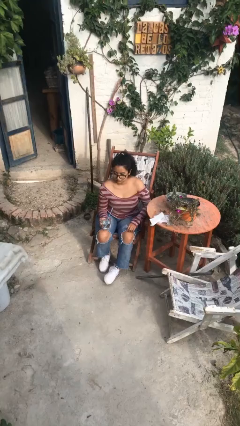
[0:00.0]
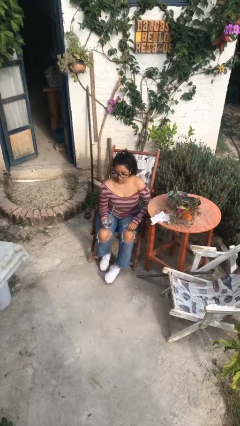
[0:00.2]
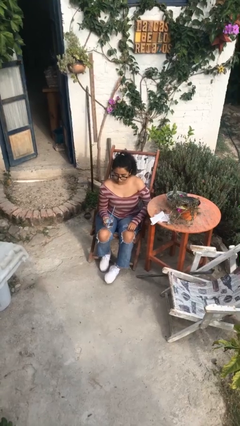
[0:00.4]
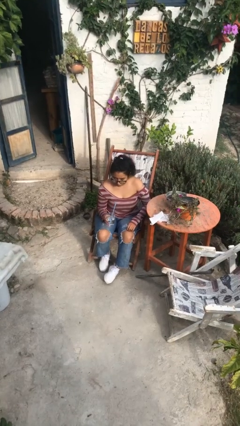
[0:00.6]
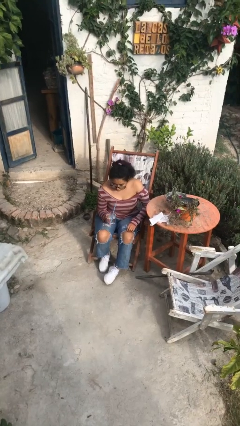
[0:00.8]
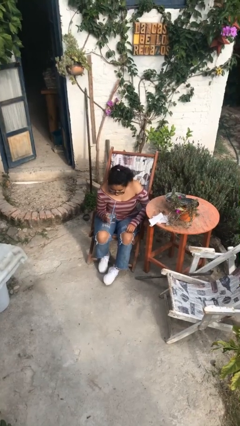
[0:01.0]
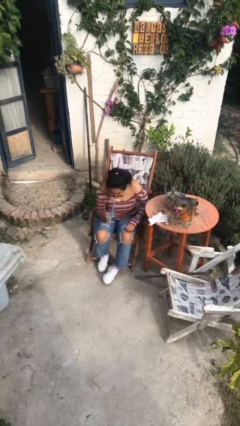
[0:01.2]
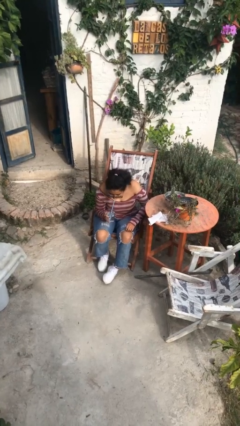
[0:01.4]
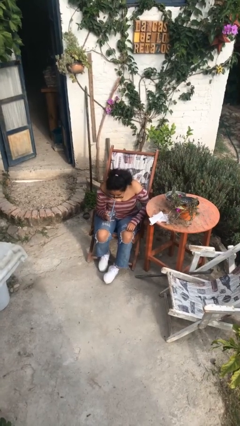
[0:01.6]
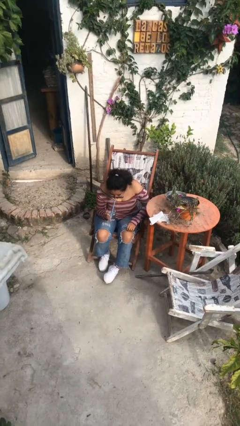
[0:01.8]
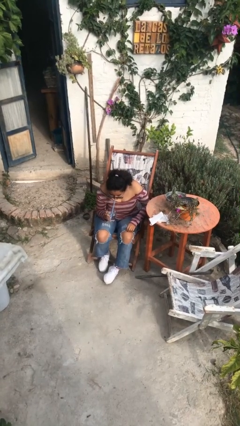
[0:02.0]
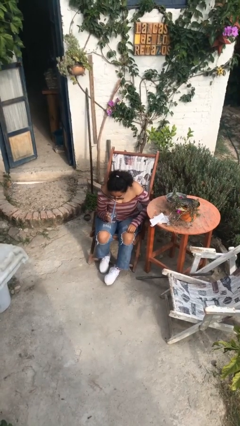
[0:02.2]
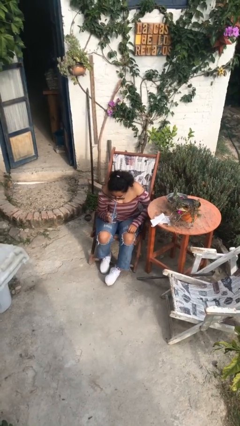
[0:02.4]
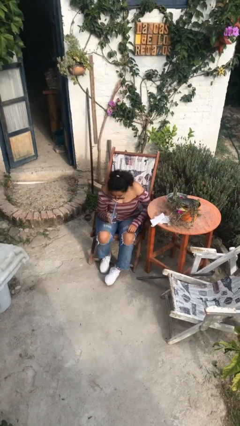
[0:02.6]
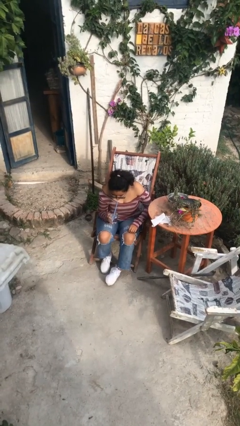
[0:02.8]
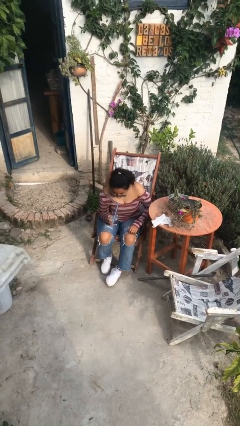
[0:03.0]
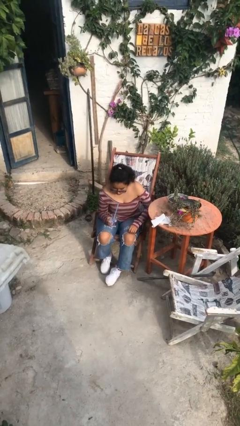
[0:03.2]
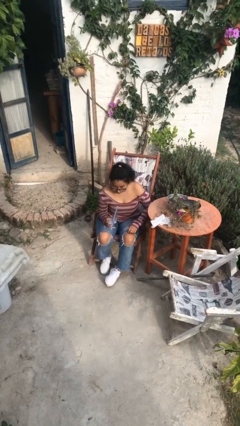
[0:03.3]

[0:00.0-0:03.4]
person drinks from straw

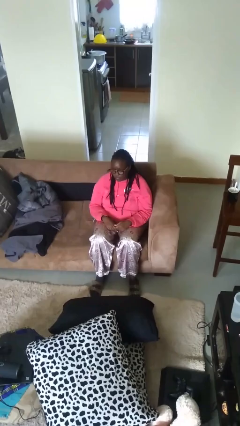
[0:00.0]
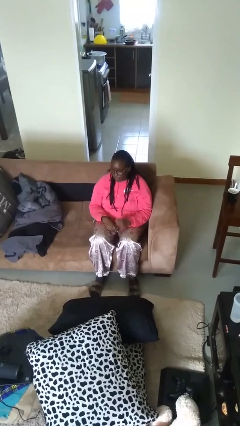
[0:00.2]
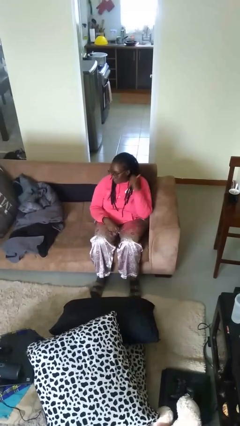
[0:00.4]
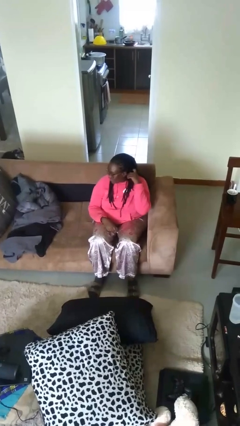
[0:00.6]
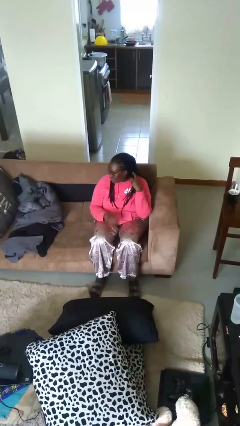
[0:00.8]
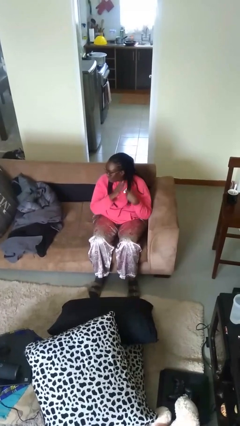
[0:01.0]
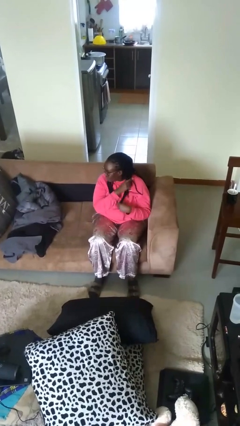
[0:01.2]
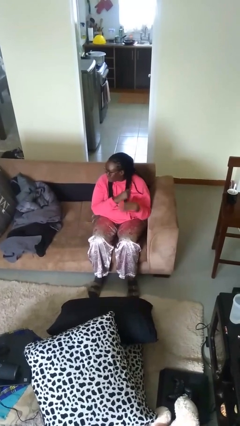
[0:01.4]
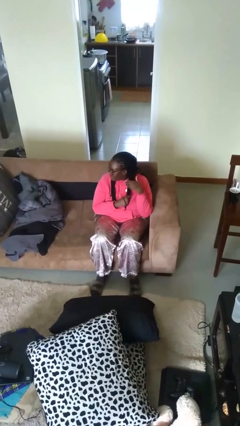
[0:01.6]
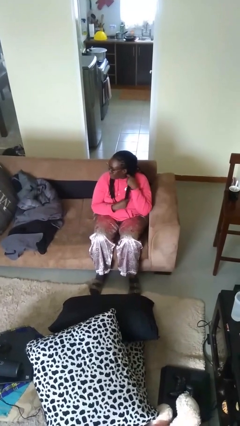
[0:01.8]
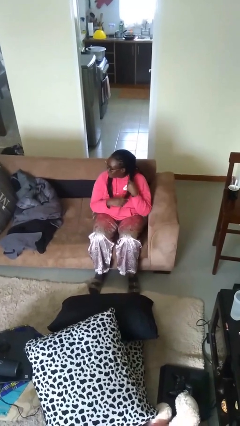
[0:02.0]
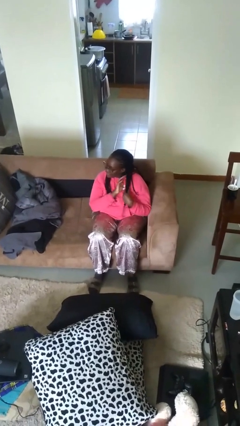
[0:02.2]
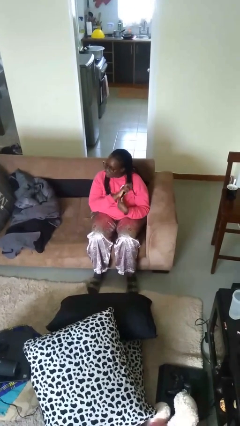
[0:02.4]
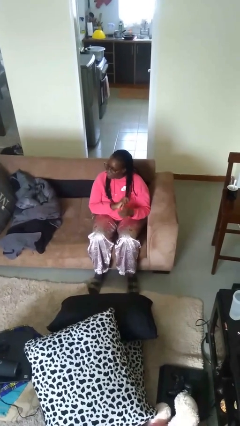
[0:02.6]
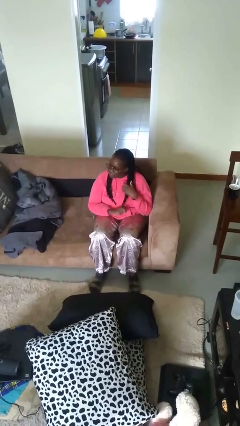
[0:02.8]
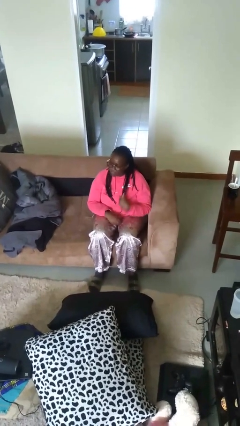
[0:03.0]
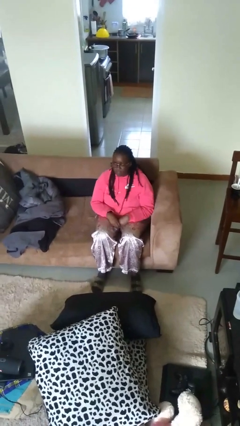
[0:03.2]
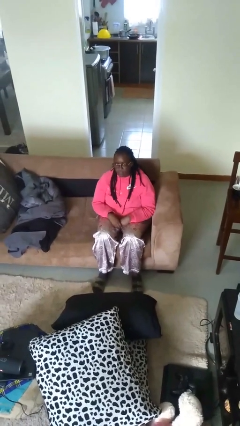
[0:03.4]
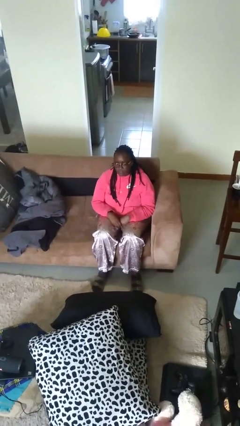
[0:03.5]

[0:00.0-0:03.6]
person strokes hair

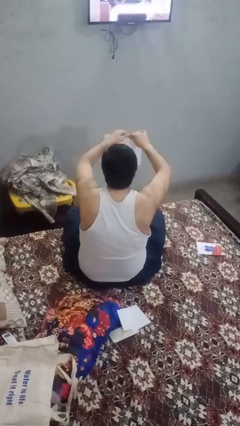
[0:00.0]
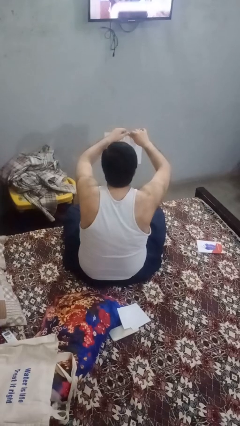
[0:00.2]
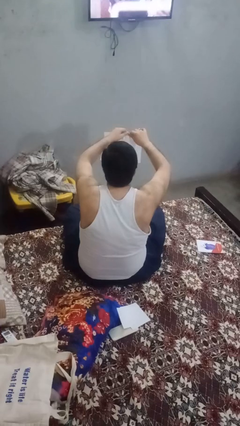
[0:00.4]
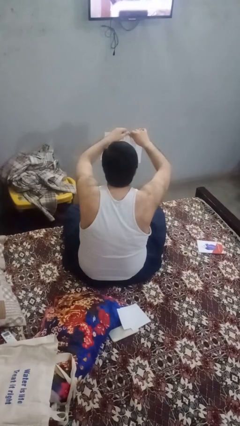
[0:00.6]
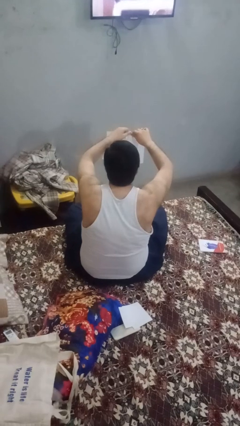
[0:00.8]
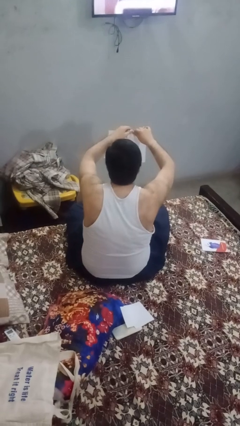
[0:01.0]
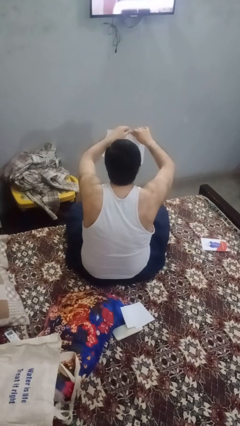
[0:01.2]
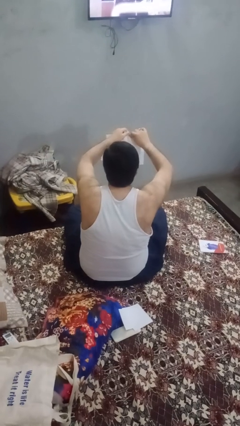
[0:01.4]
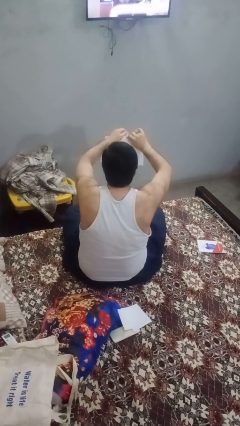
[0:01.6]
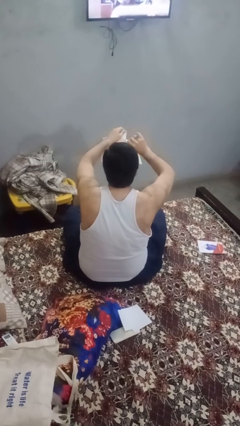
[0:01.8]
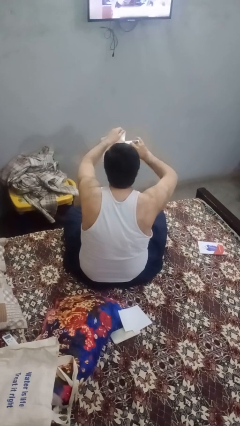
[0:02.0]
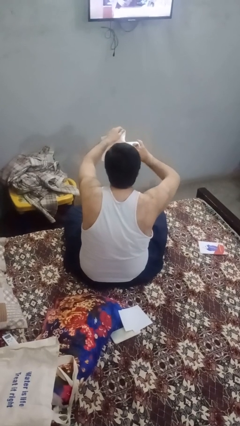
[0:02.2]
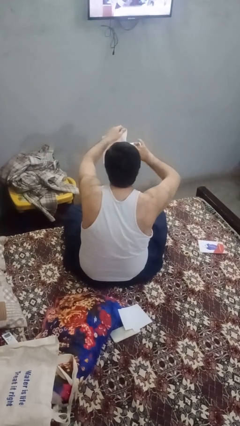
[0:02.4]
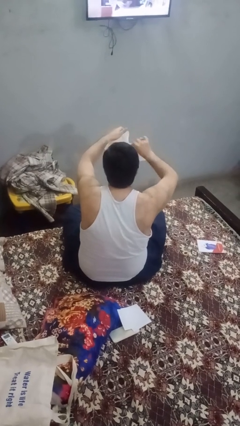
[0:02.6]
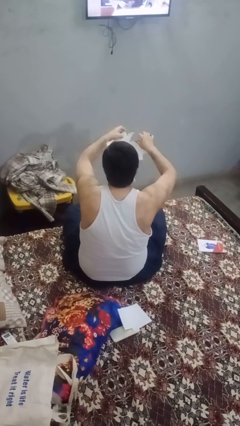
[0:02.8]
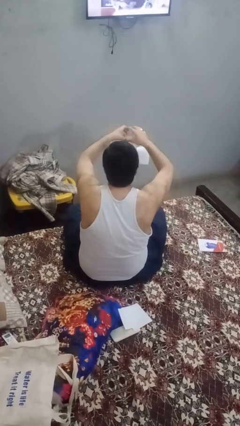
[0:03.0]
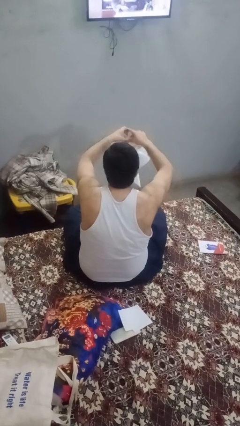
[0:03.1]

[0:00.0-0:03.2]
person tears paper

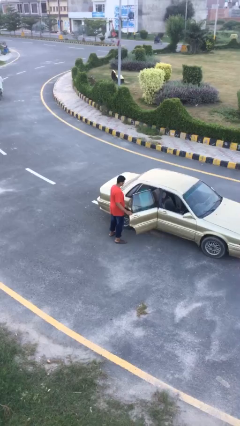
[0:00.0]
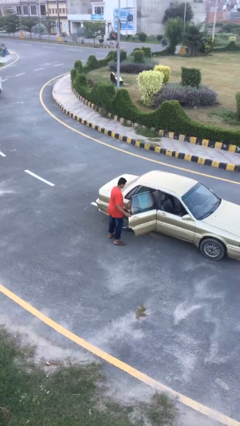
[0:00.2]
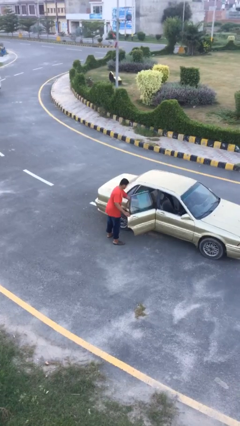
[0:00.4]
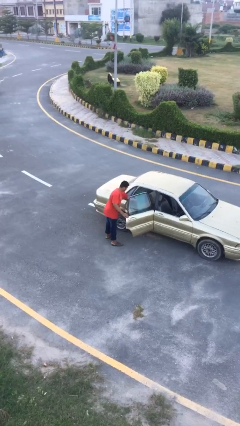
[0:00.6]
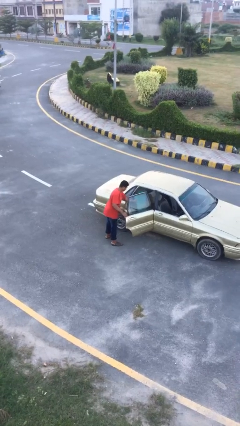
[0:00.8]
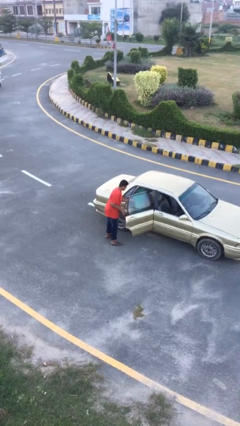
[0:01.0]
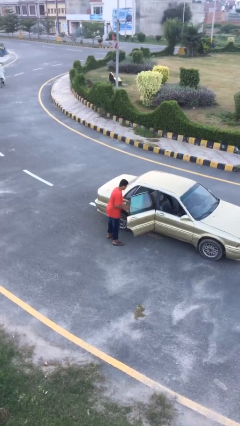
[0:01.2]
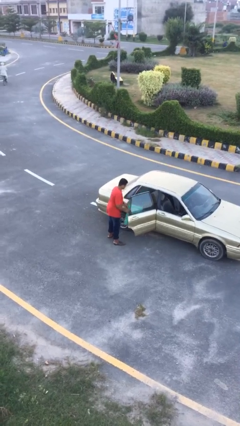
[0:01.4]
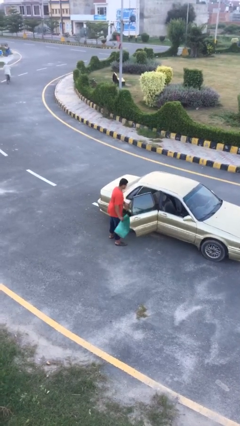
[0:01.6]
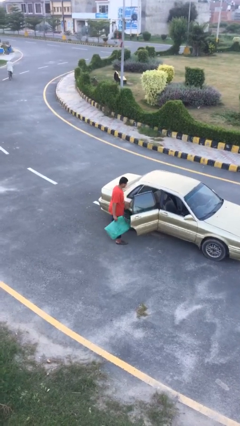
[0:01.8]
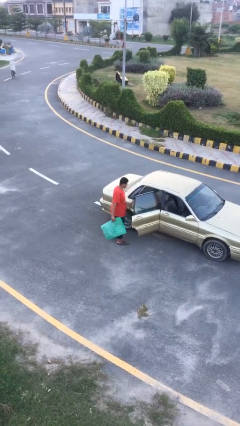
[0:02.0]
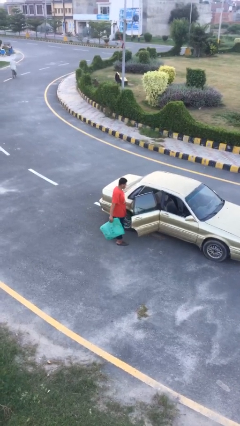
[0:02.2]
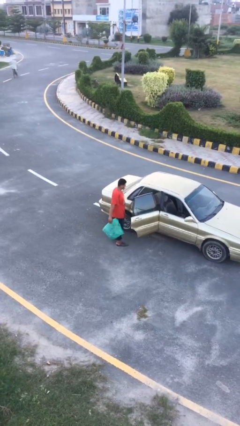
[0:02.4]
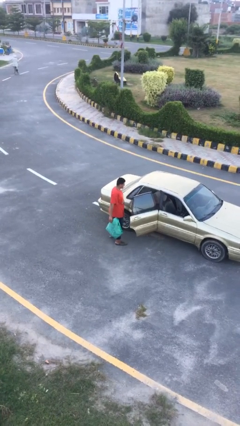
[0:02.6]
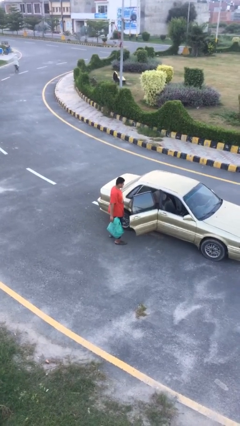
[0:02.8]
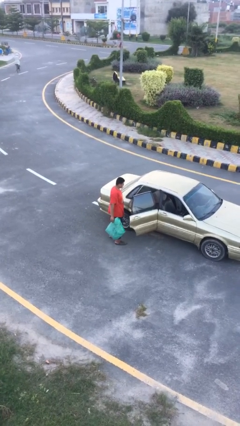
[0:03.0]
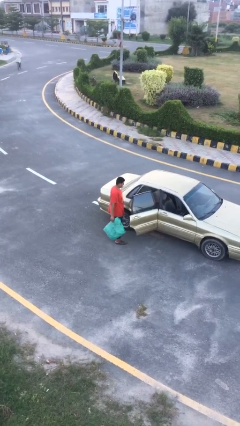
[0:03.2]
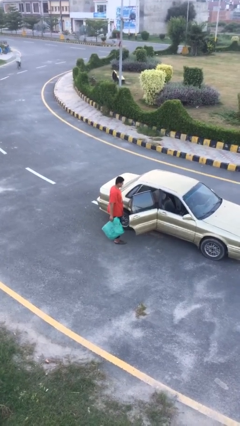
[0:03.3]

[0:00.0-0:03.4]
person unloads car

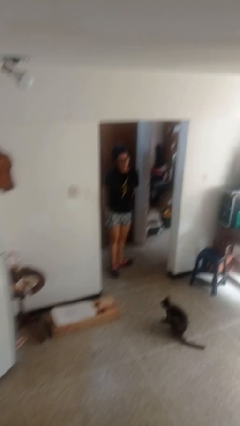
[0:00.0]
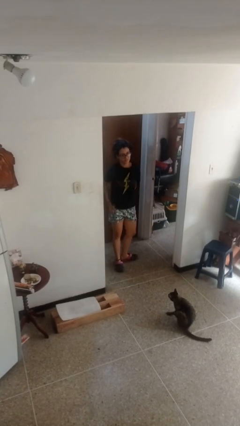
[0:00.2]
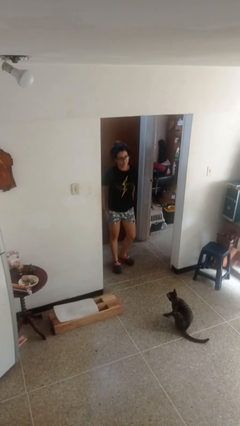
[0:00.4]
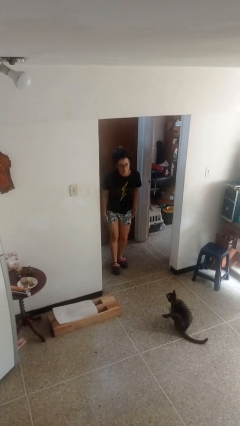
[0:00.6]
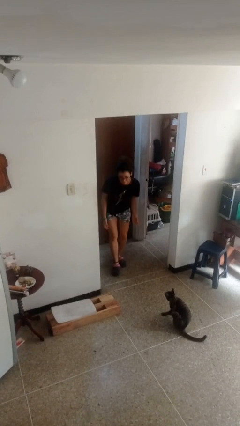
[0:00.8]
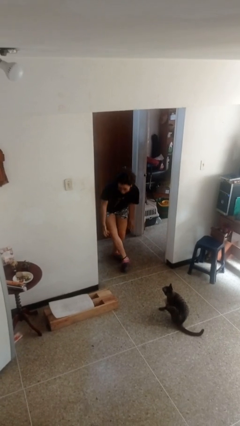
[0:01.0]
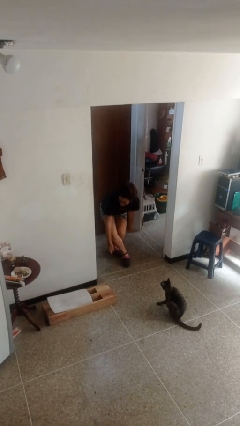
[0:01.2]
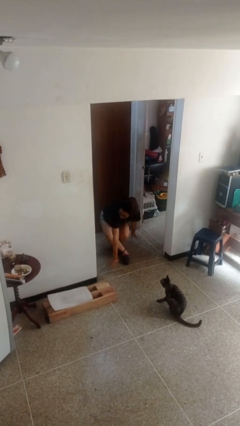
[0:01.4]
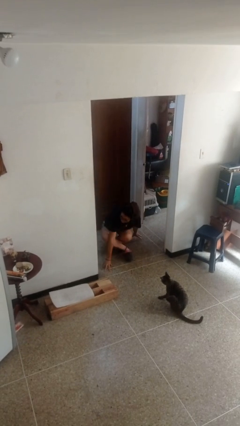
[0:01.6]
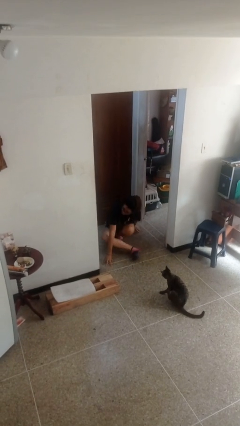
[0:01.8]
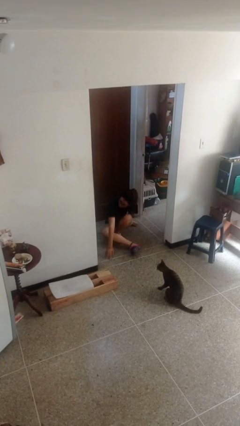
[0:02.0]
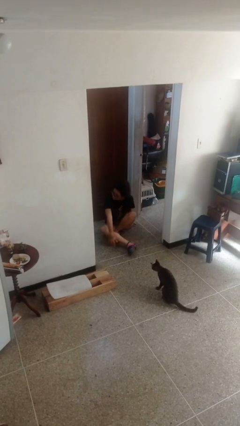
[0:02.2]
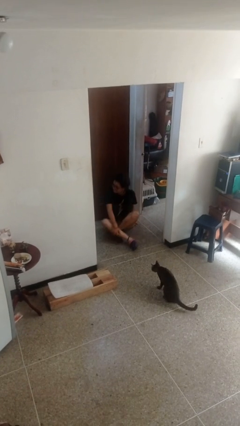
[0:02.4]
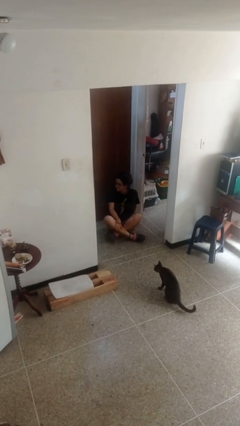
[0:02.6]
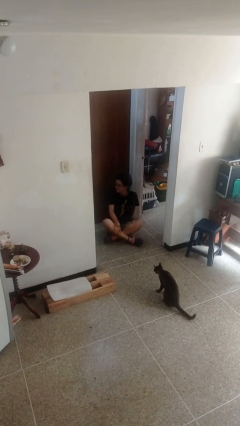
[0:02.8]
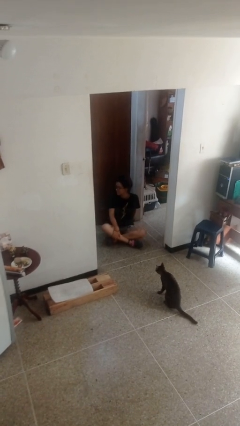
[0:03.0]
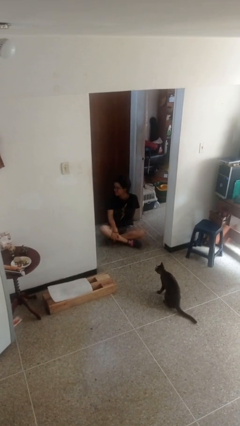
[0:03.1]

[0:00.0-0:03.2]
person sits crisscross

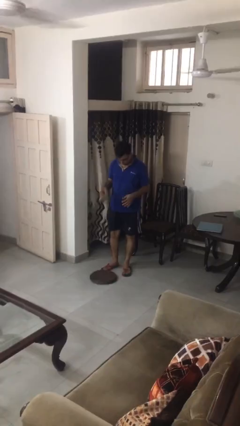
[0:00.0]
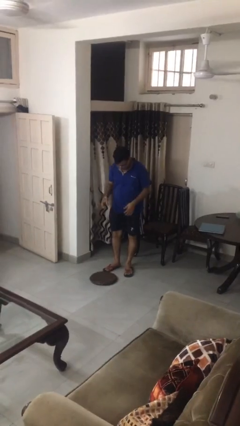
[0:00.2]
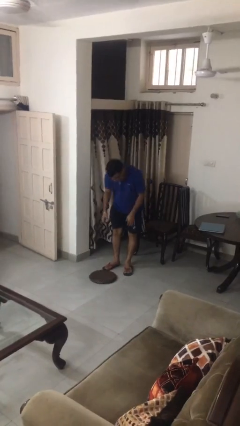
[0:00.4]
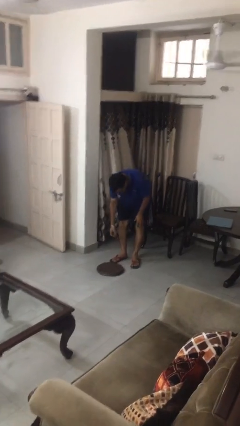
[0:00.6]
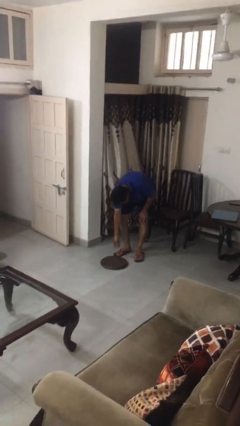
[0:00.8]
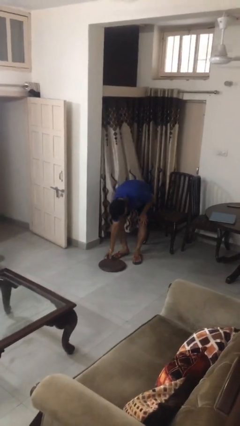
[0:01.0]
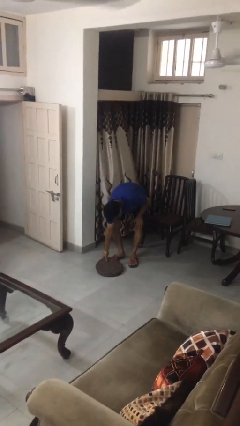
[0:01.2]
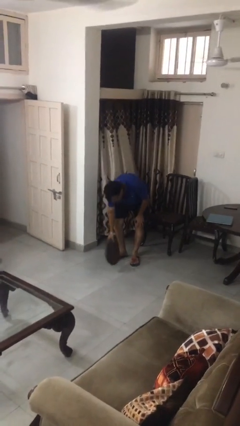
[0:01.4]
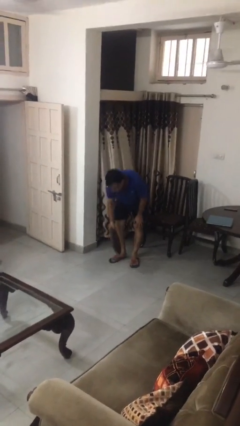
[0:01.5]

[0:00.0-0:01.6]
person picks up object from floor
